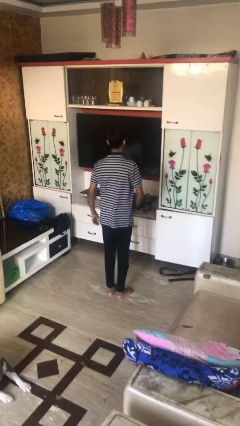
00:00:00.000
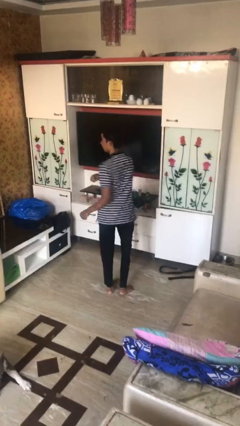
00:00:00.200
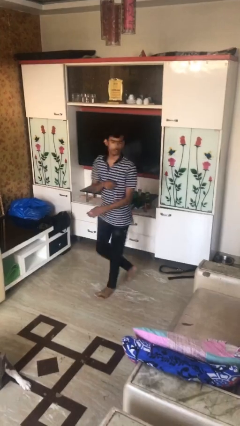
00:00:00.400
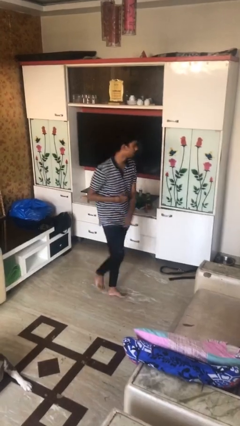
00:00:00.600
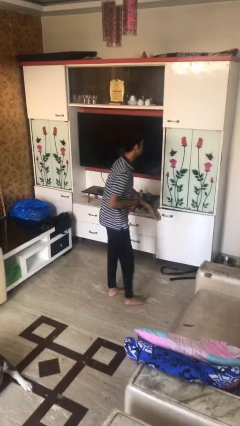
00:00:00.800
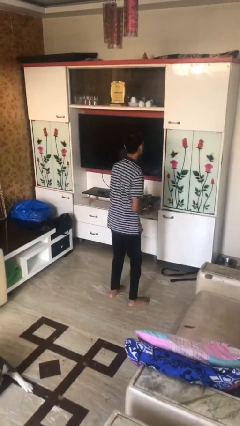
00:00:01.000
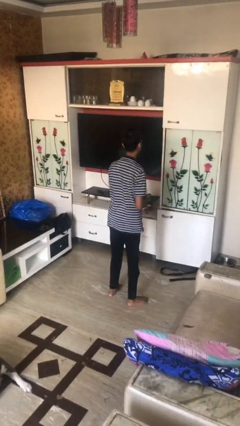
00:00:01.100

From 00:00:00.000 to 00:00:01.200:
person twirls

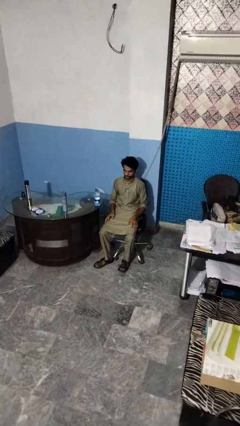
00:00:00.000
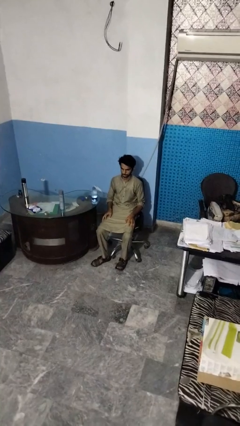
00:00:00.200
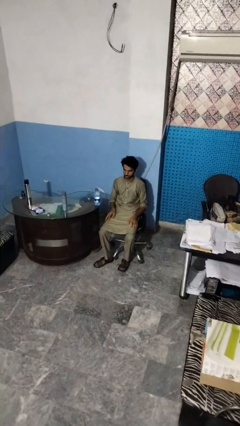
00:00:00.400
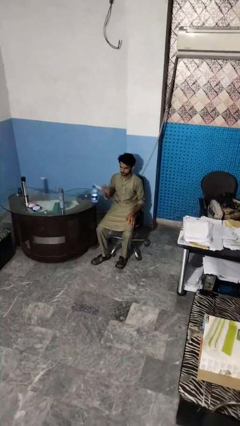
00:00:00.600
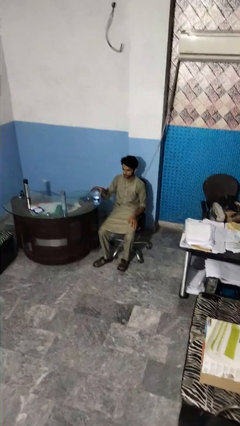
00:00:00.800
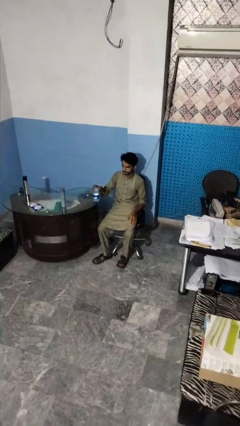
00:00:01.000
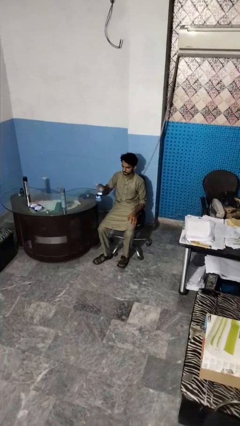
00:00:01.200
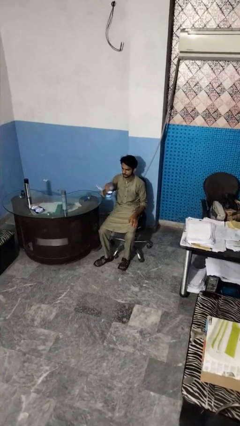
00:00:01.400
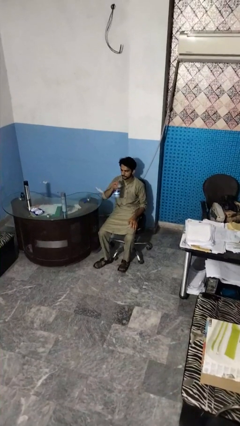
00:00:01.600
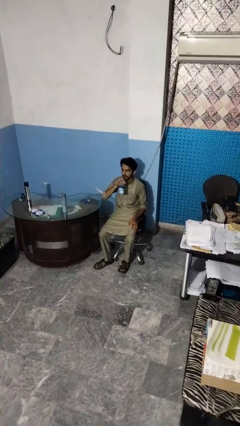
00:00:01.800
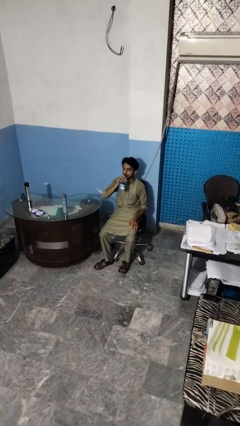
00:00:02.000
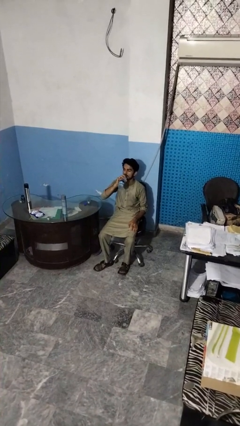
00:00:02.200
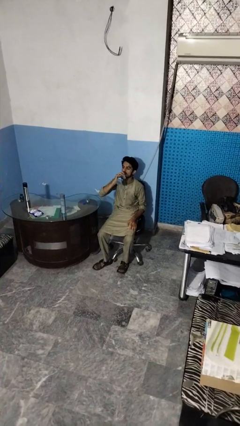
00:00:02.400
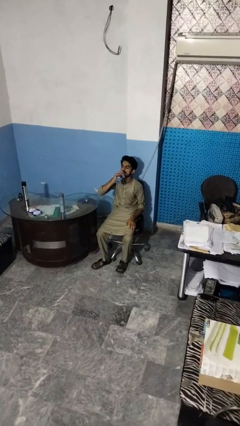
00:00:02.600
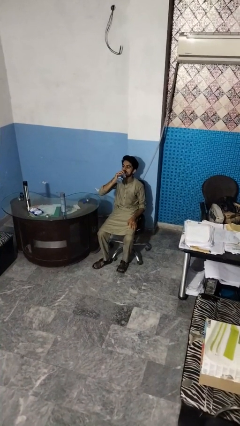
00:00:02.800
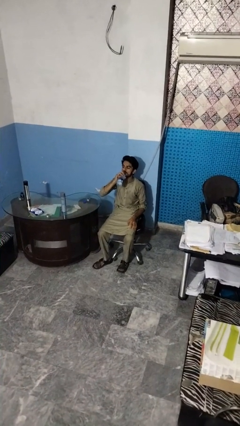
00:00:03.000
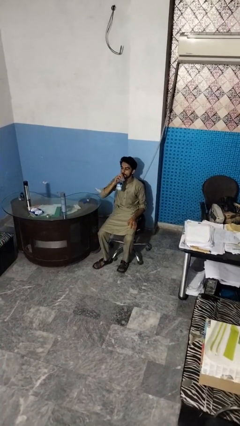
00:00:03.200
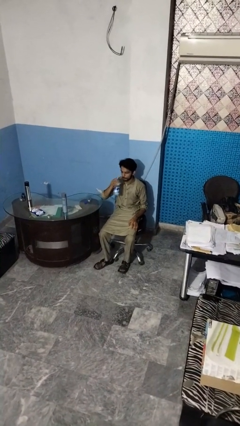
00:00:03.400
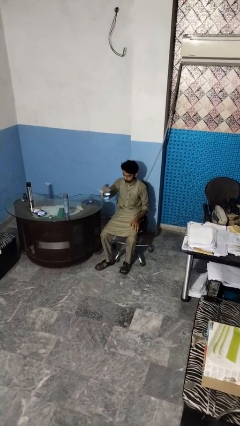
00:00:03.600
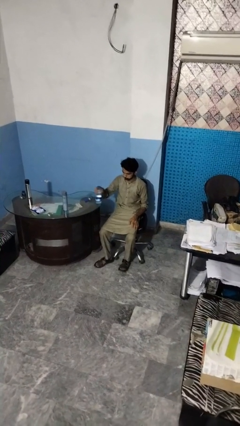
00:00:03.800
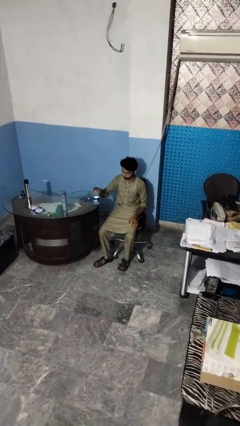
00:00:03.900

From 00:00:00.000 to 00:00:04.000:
person drinks from bottle

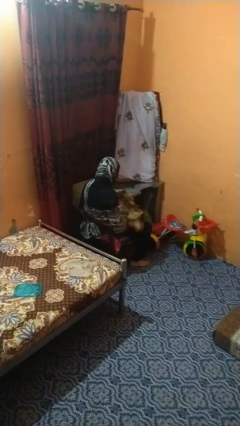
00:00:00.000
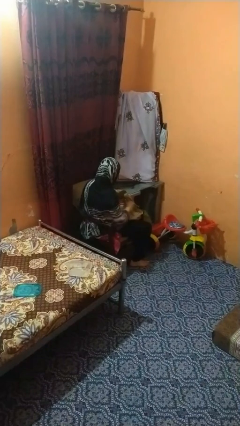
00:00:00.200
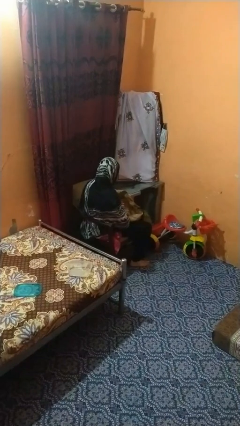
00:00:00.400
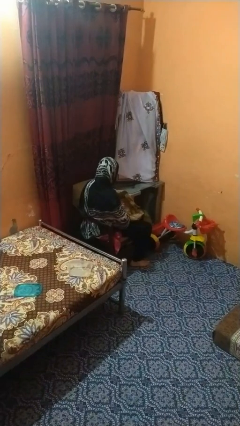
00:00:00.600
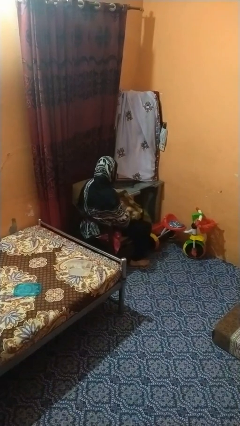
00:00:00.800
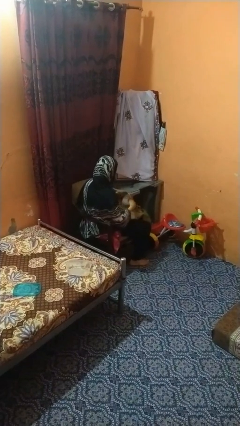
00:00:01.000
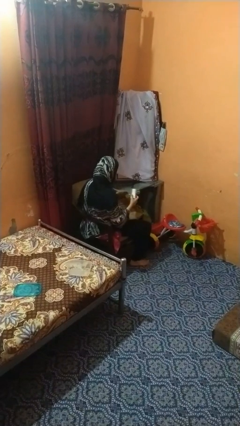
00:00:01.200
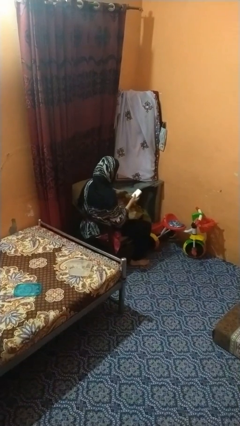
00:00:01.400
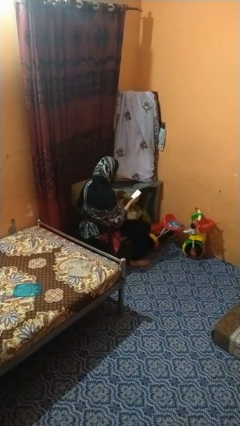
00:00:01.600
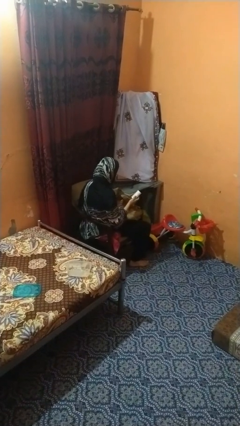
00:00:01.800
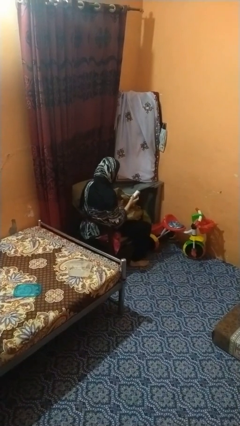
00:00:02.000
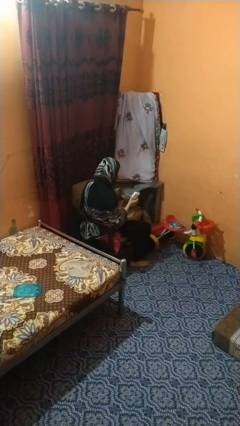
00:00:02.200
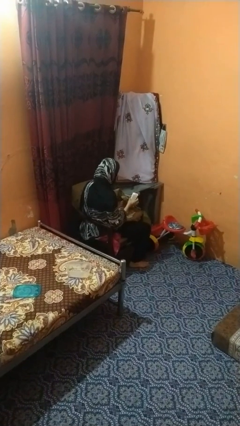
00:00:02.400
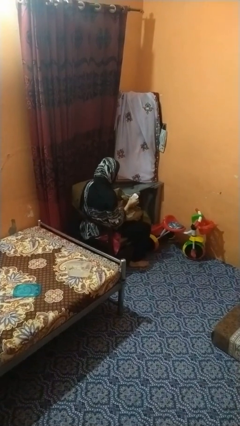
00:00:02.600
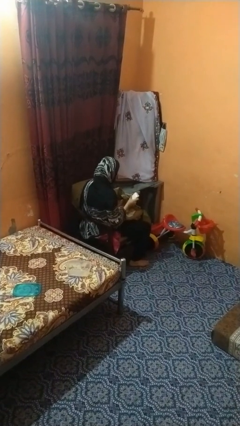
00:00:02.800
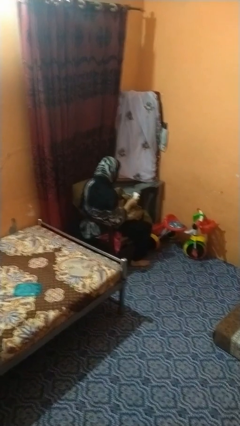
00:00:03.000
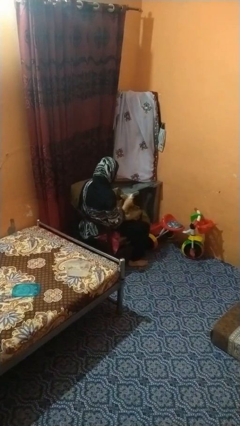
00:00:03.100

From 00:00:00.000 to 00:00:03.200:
person takes object from bag

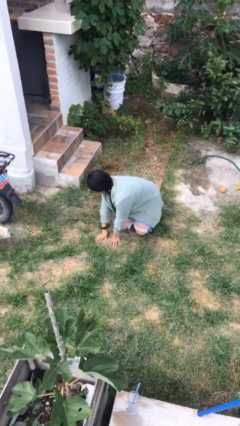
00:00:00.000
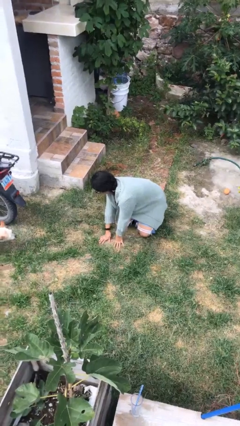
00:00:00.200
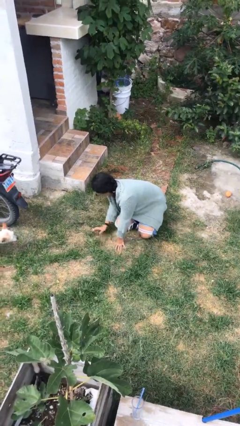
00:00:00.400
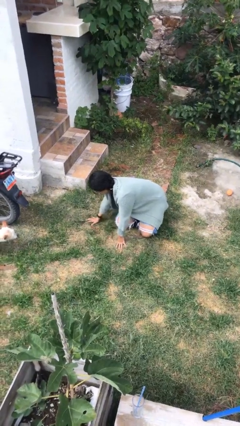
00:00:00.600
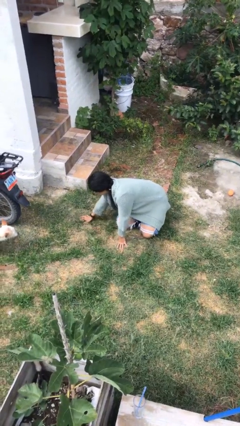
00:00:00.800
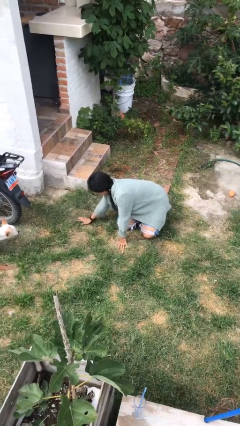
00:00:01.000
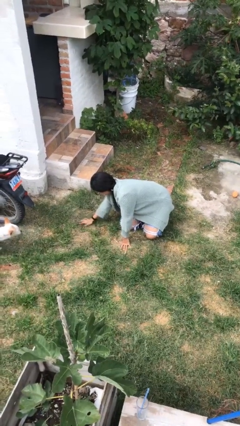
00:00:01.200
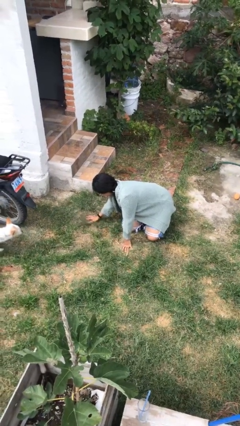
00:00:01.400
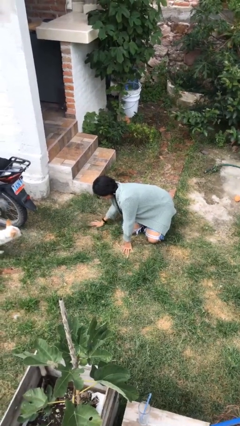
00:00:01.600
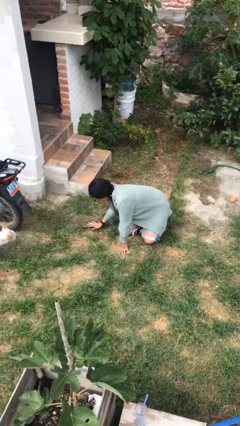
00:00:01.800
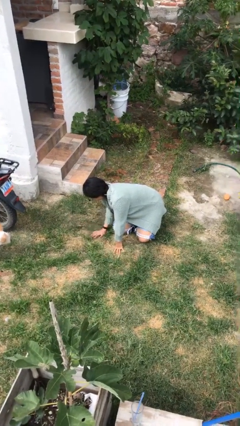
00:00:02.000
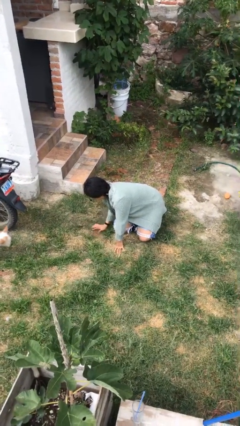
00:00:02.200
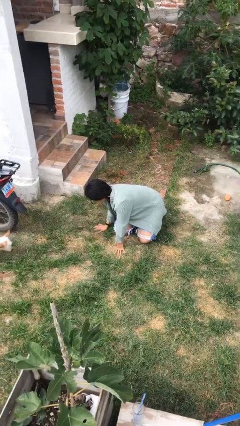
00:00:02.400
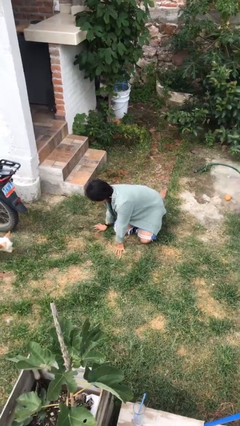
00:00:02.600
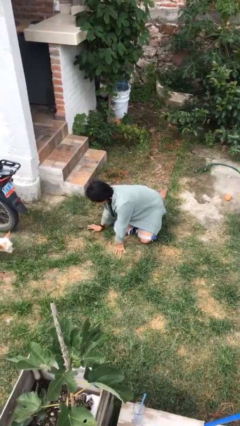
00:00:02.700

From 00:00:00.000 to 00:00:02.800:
person crawls

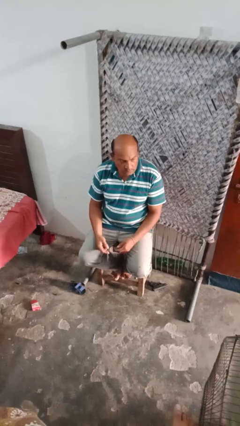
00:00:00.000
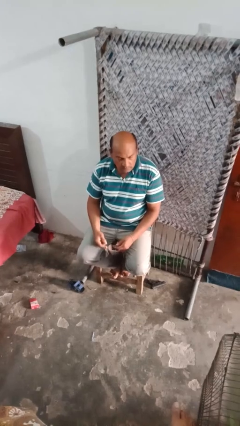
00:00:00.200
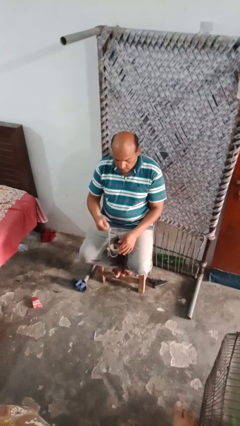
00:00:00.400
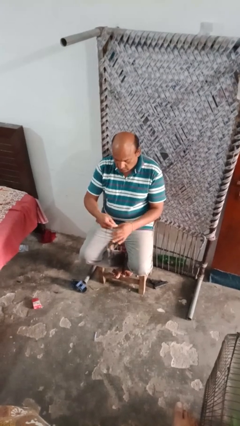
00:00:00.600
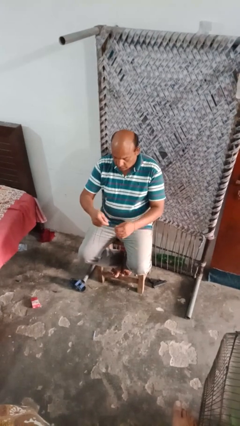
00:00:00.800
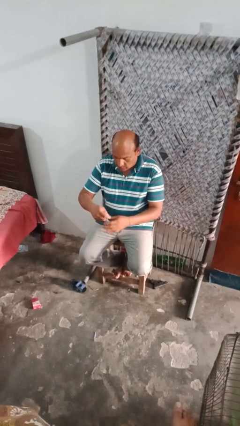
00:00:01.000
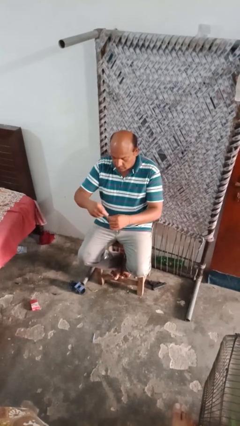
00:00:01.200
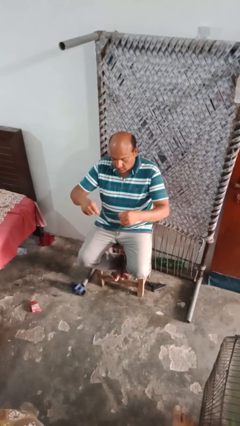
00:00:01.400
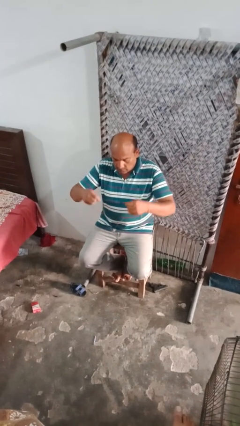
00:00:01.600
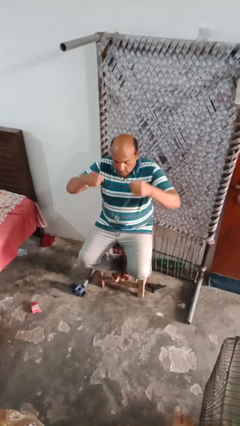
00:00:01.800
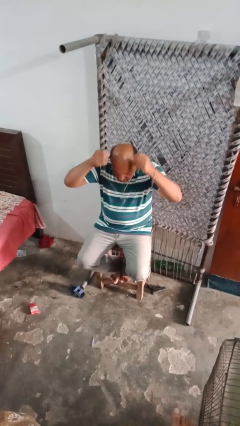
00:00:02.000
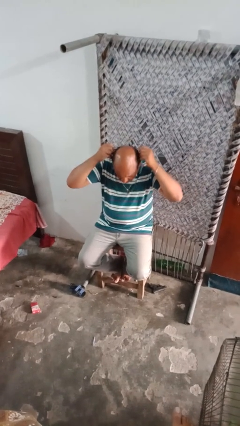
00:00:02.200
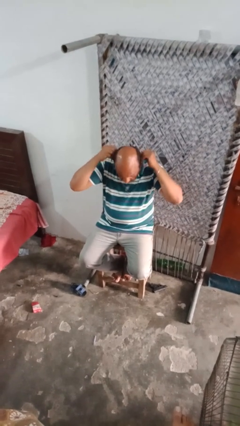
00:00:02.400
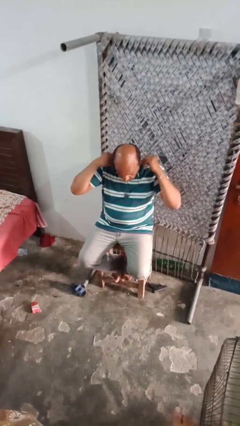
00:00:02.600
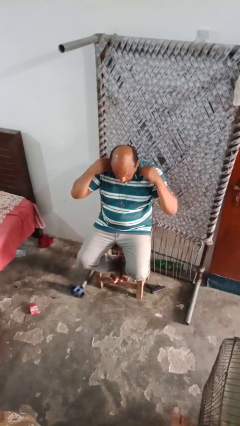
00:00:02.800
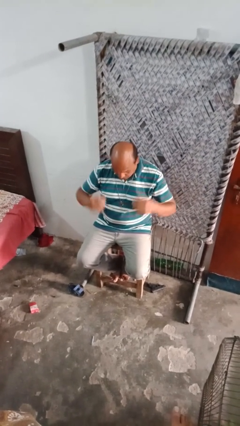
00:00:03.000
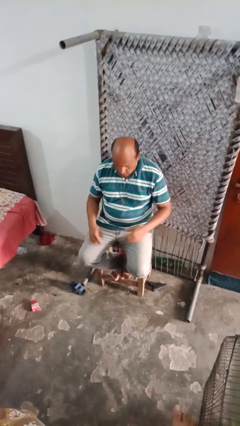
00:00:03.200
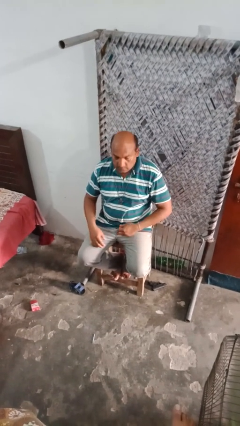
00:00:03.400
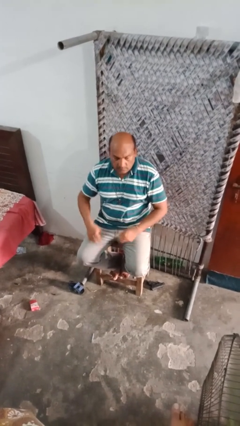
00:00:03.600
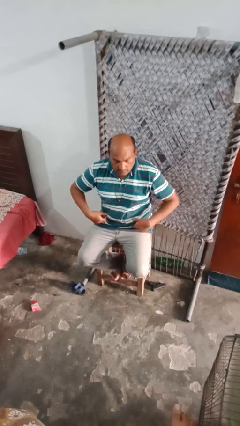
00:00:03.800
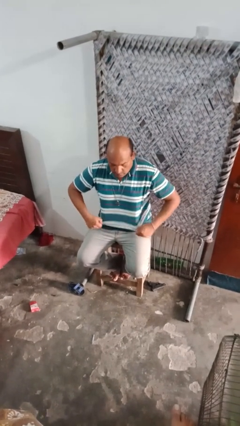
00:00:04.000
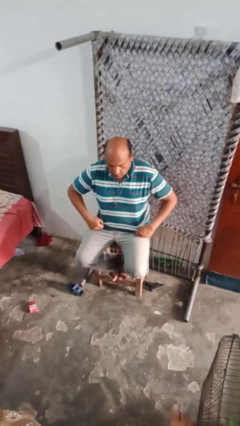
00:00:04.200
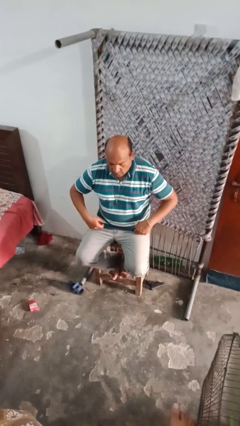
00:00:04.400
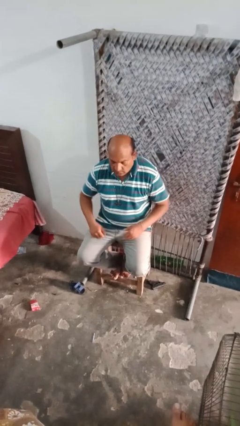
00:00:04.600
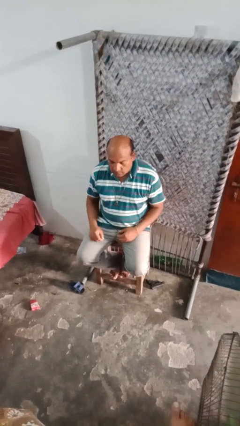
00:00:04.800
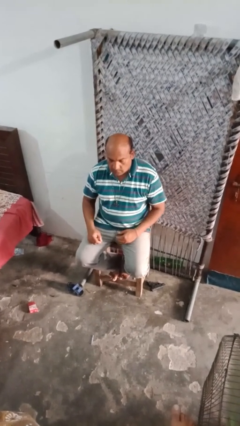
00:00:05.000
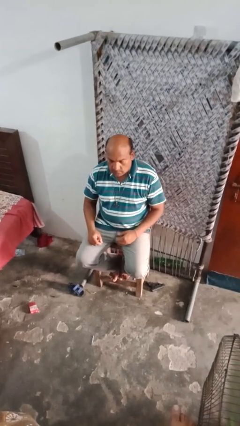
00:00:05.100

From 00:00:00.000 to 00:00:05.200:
person puts on necklace

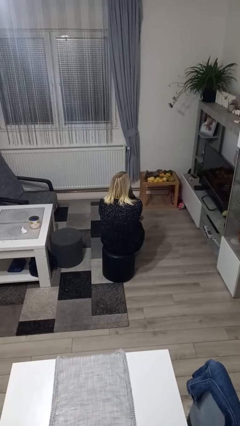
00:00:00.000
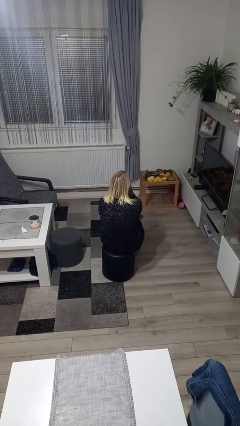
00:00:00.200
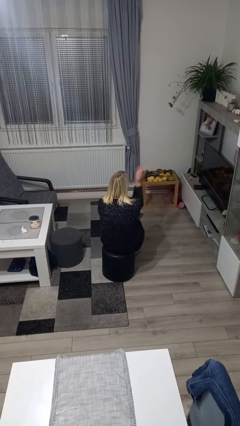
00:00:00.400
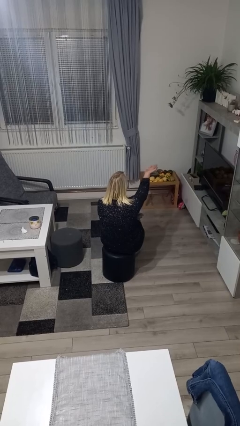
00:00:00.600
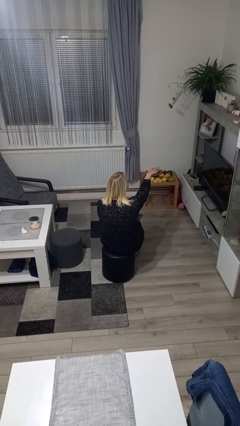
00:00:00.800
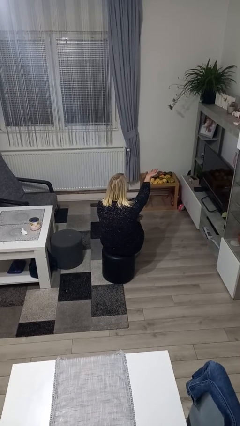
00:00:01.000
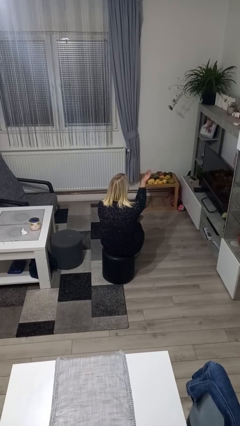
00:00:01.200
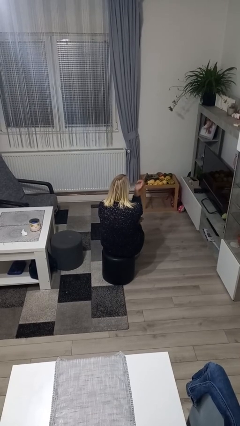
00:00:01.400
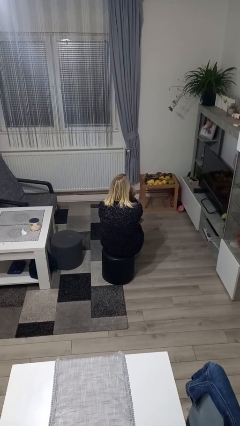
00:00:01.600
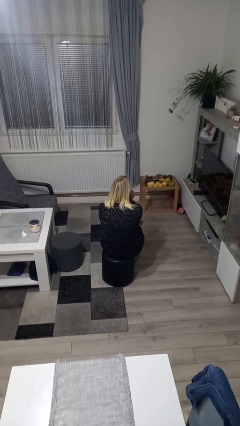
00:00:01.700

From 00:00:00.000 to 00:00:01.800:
person gestures blow kiss
